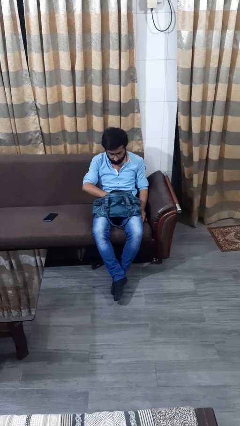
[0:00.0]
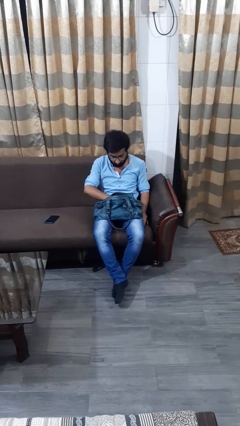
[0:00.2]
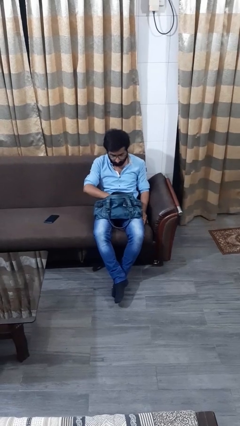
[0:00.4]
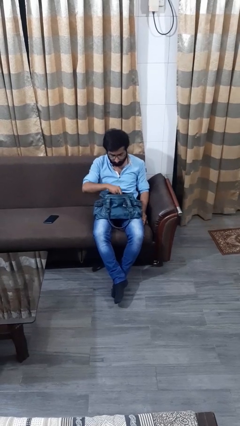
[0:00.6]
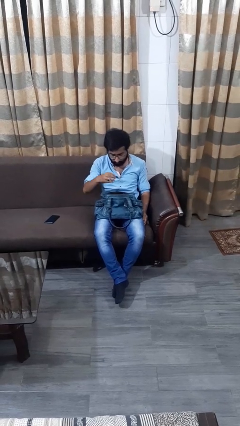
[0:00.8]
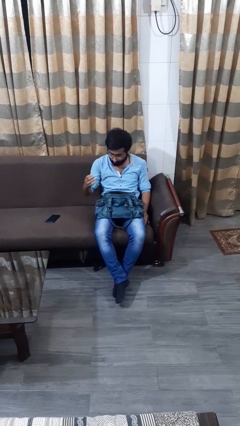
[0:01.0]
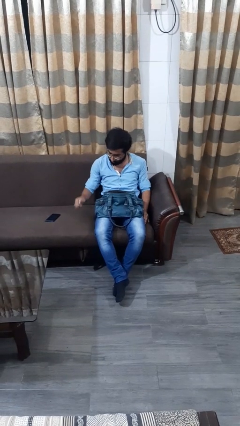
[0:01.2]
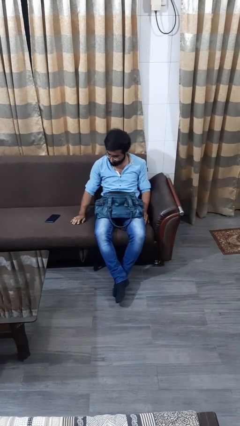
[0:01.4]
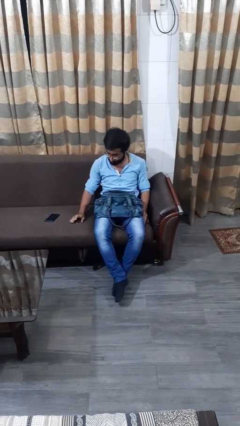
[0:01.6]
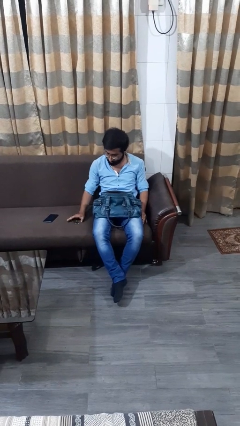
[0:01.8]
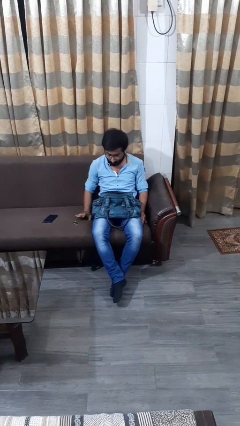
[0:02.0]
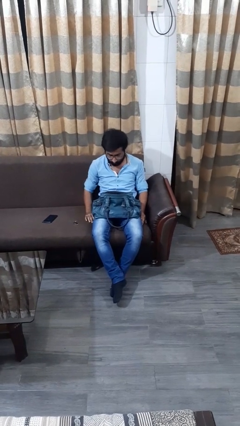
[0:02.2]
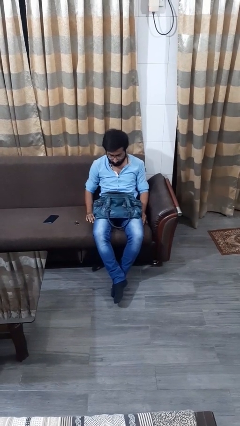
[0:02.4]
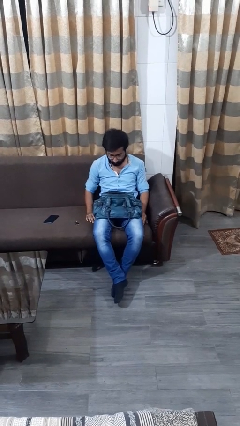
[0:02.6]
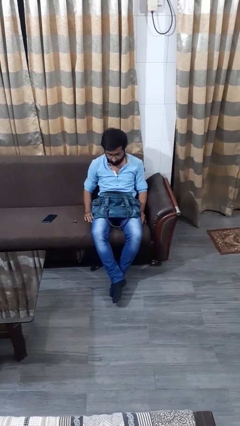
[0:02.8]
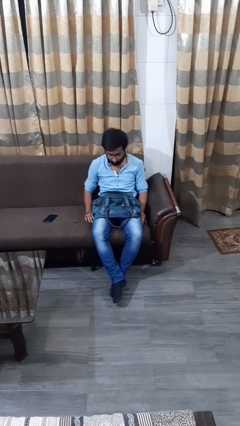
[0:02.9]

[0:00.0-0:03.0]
person takes object from purse

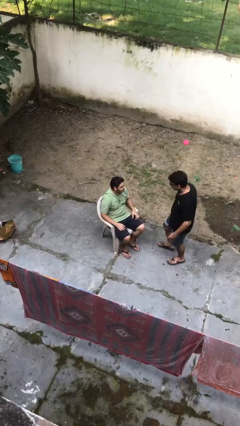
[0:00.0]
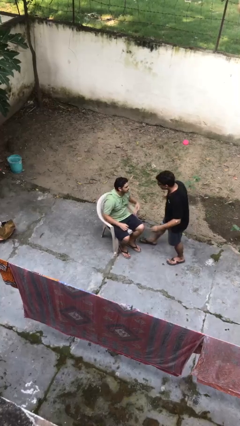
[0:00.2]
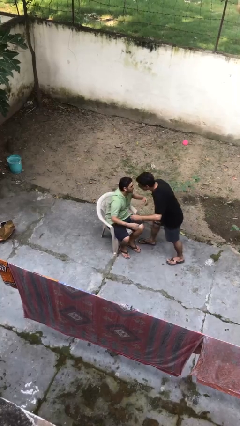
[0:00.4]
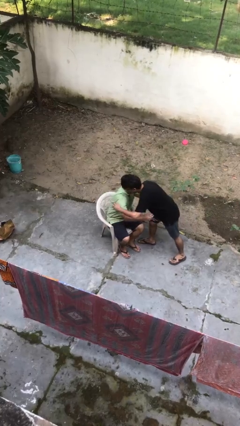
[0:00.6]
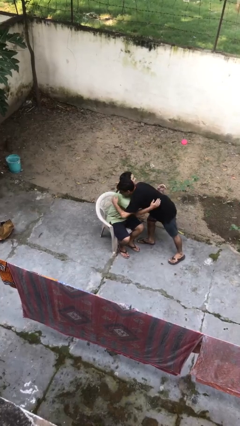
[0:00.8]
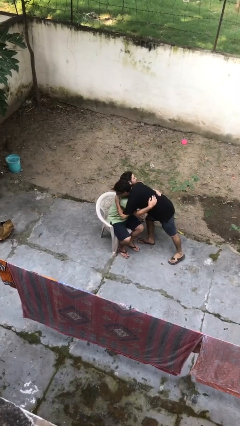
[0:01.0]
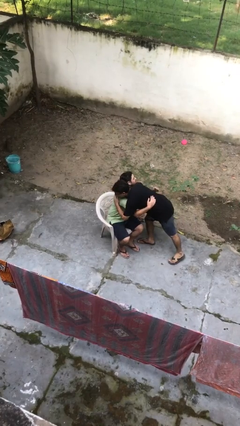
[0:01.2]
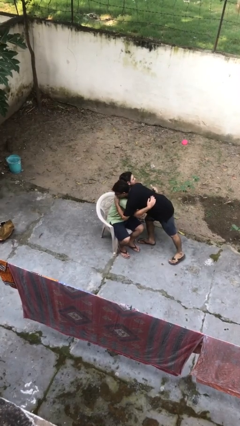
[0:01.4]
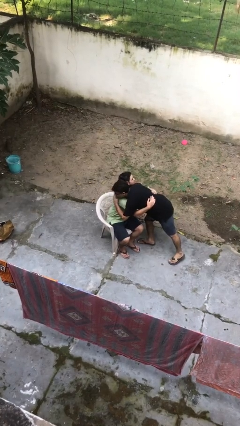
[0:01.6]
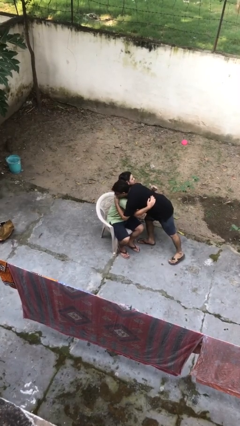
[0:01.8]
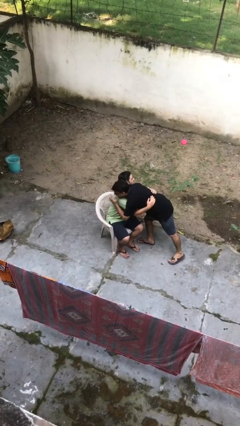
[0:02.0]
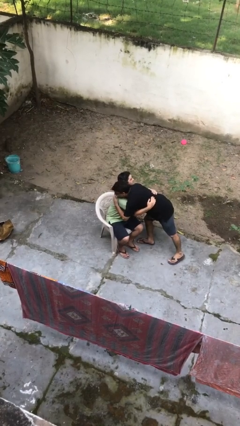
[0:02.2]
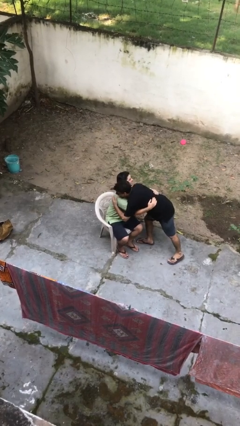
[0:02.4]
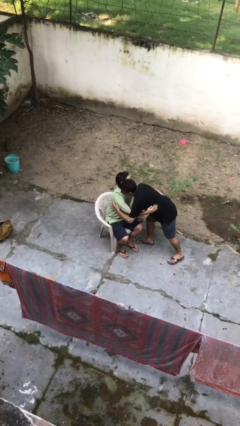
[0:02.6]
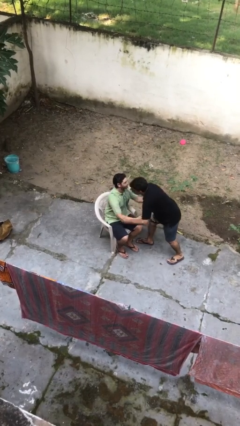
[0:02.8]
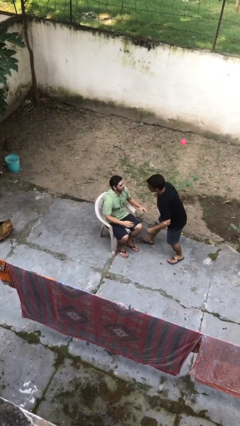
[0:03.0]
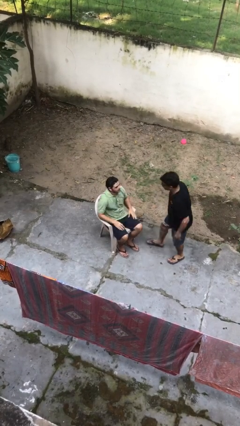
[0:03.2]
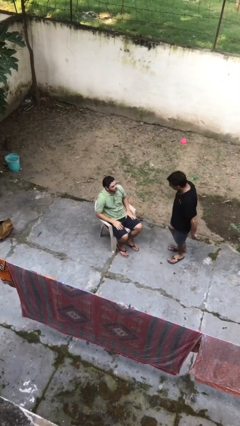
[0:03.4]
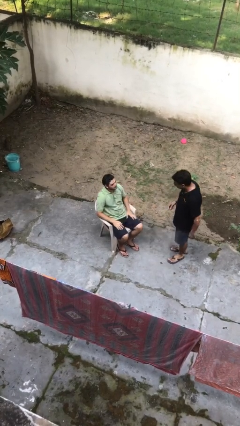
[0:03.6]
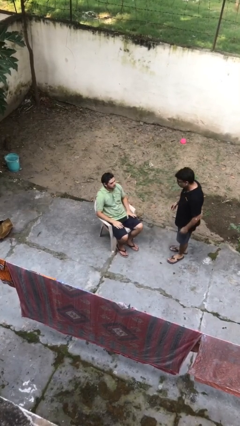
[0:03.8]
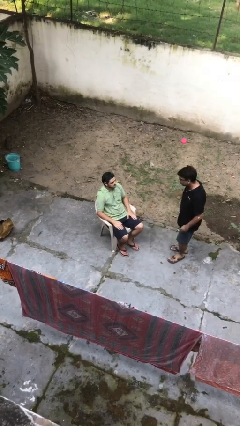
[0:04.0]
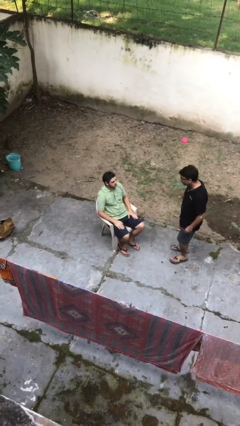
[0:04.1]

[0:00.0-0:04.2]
person embraces person

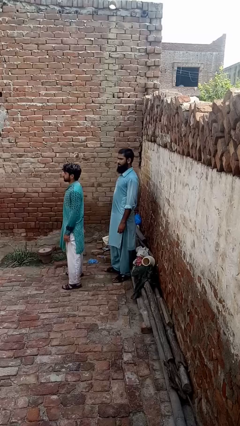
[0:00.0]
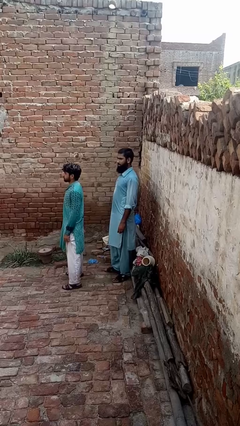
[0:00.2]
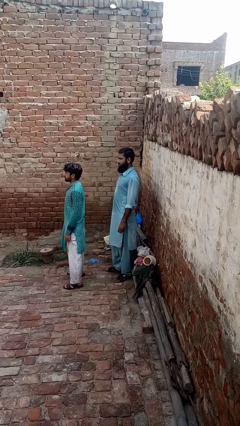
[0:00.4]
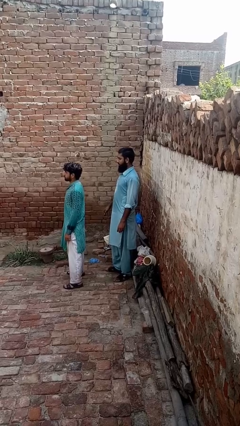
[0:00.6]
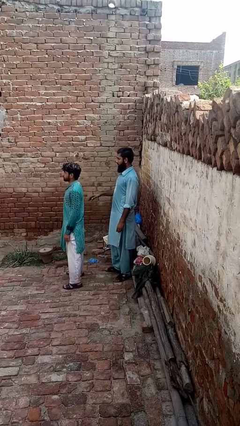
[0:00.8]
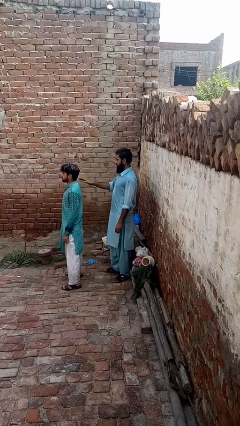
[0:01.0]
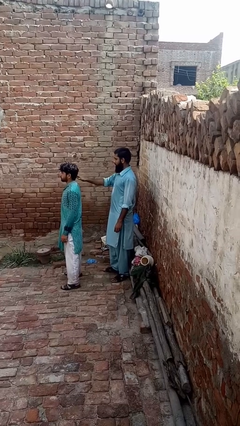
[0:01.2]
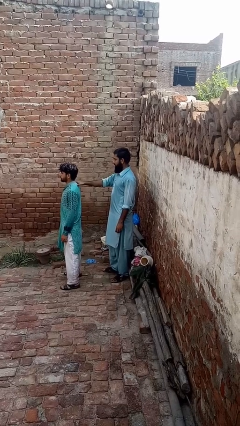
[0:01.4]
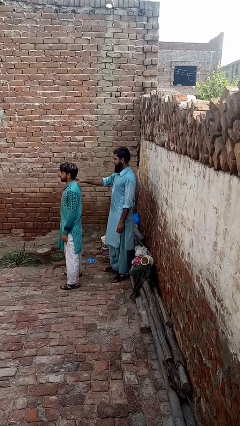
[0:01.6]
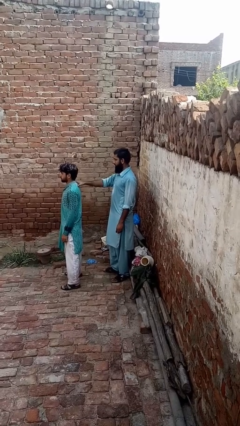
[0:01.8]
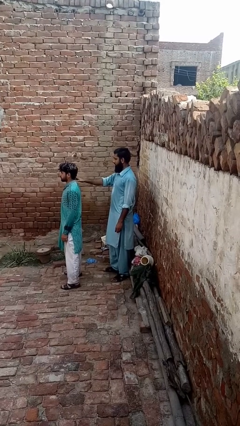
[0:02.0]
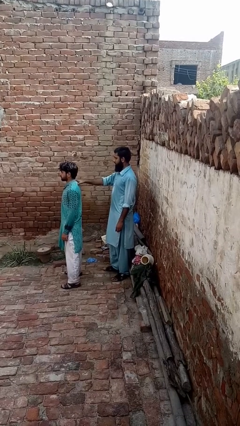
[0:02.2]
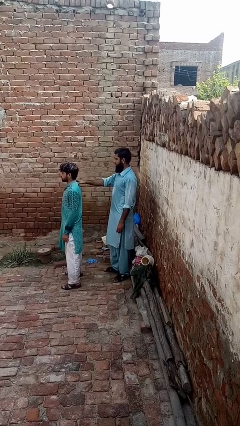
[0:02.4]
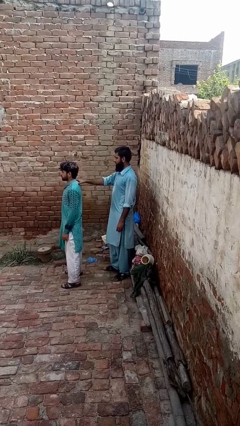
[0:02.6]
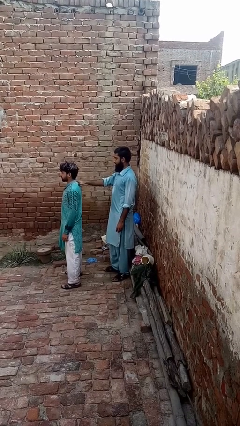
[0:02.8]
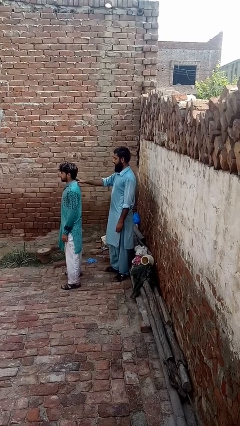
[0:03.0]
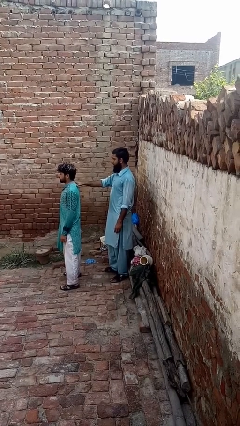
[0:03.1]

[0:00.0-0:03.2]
person touches back of person

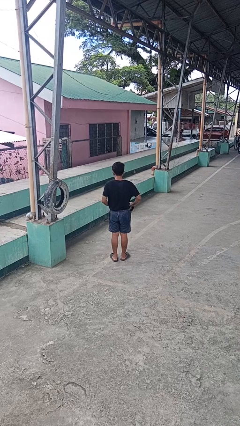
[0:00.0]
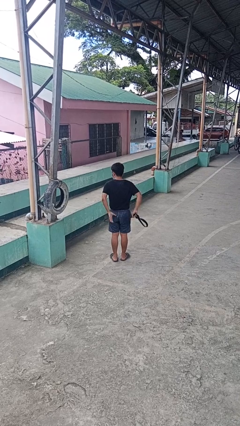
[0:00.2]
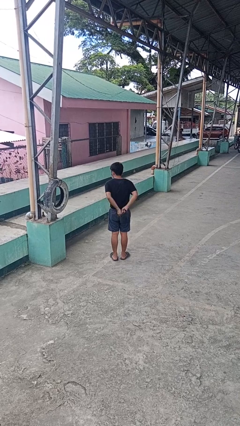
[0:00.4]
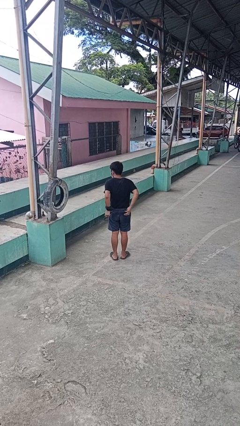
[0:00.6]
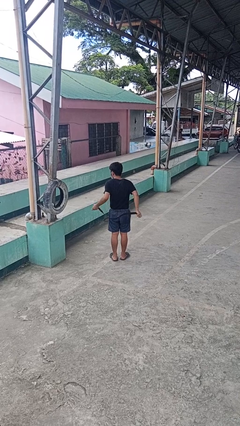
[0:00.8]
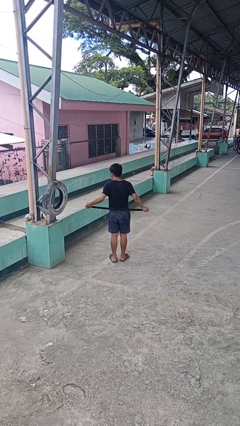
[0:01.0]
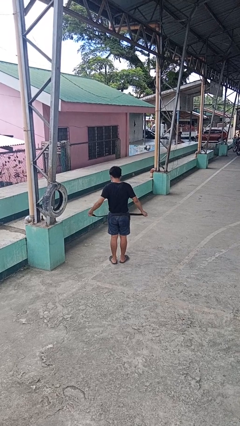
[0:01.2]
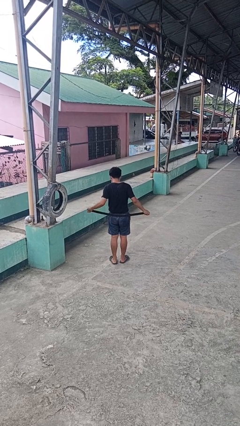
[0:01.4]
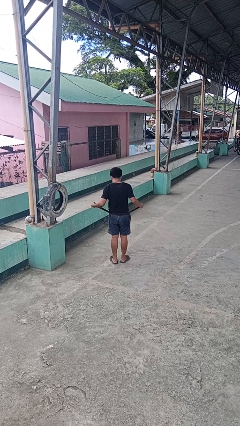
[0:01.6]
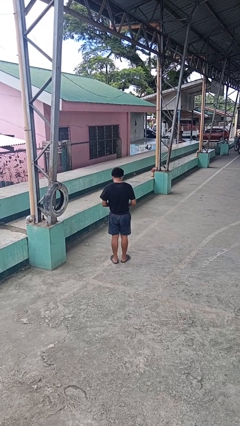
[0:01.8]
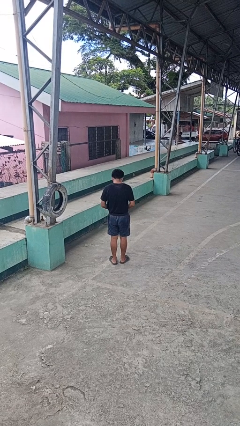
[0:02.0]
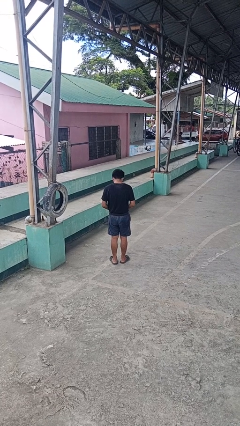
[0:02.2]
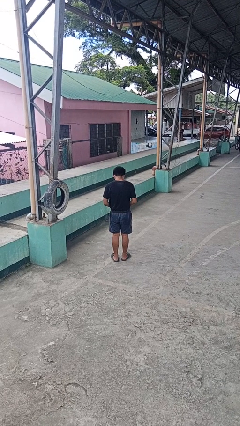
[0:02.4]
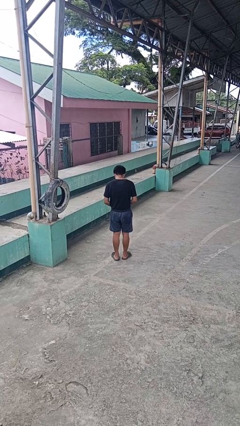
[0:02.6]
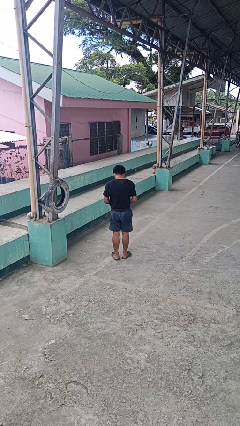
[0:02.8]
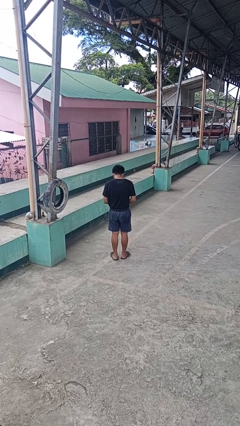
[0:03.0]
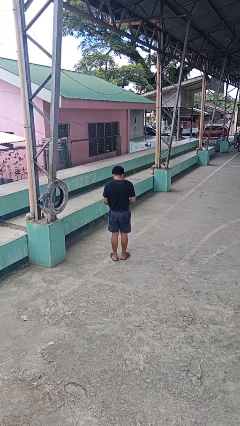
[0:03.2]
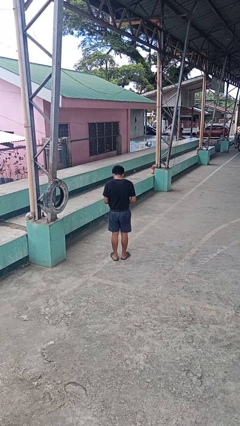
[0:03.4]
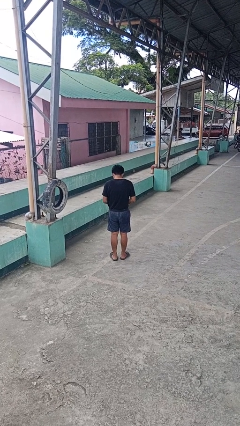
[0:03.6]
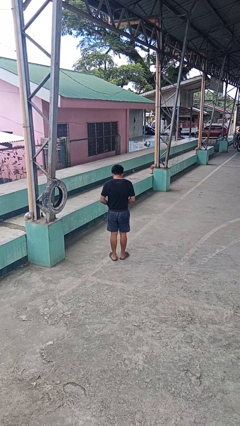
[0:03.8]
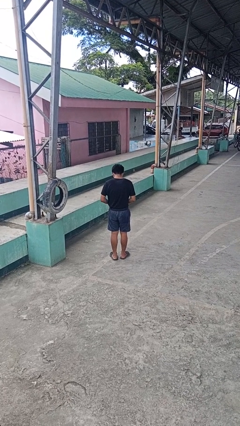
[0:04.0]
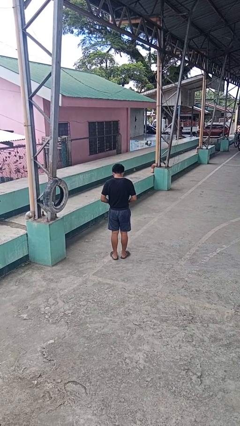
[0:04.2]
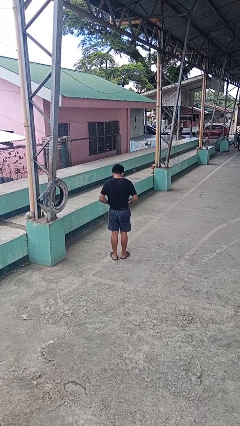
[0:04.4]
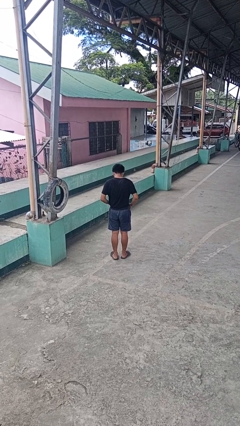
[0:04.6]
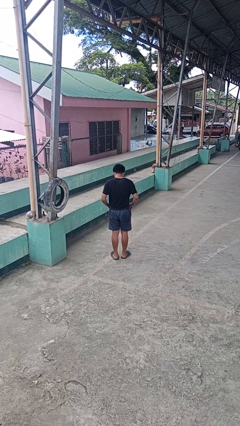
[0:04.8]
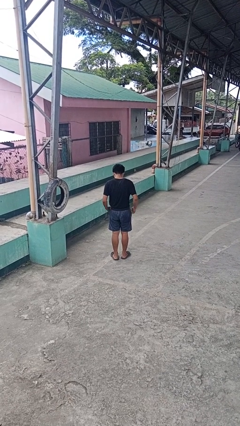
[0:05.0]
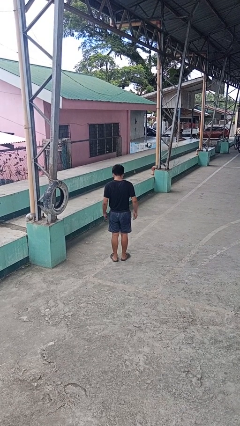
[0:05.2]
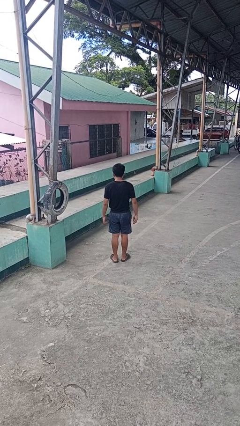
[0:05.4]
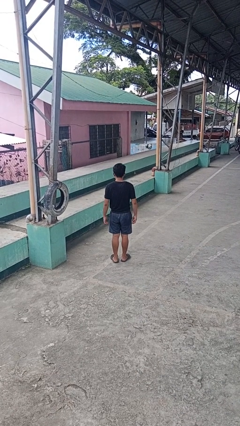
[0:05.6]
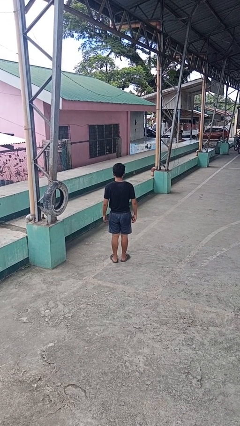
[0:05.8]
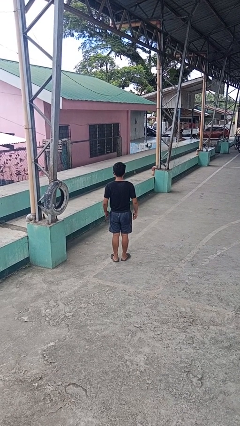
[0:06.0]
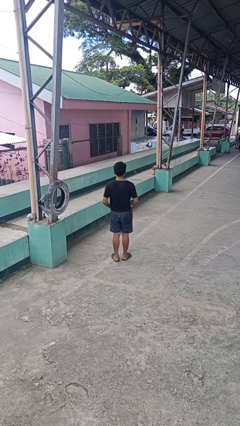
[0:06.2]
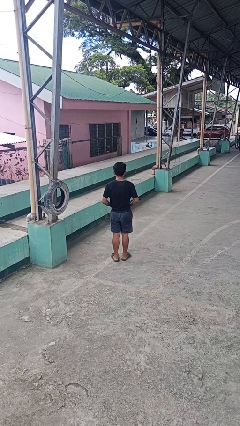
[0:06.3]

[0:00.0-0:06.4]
person puts on belt

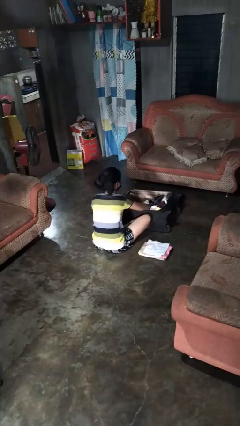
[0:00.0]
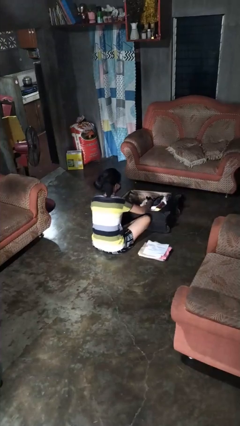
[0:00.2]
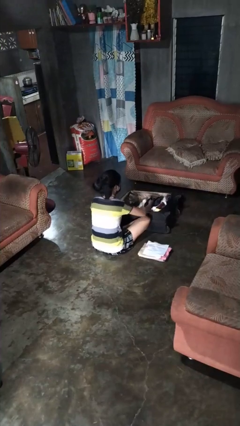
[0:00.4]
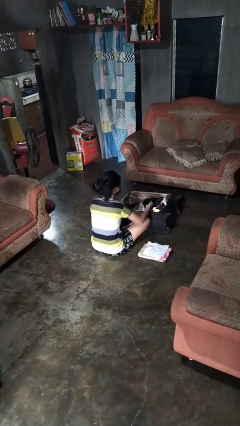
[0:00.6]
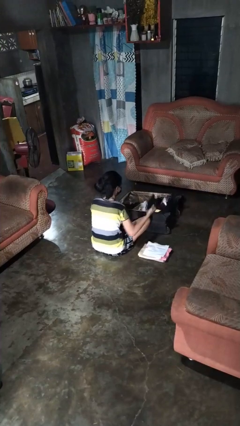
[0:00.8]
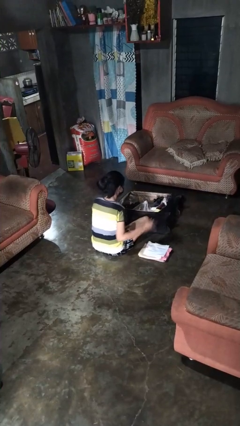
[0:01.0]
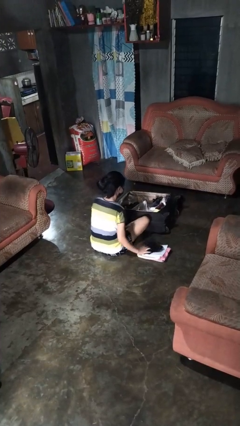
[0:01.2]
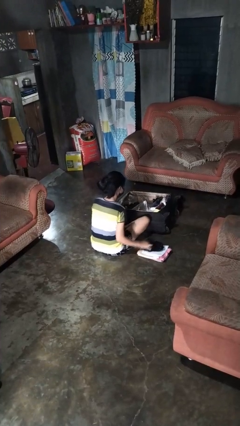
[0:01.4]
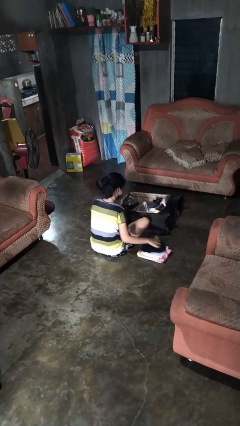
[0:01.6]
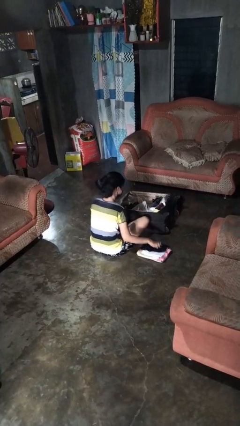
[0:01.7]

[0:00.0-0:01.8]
person unloads clothes from suitcase
